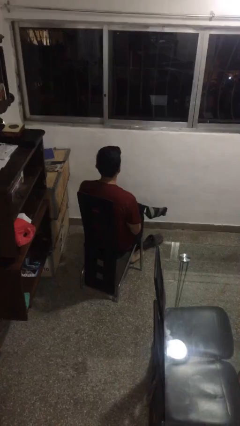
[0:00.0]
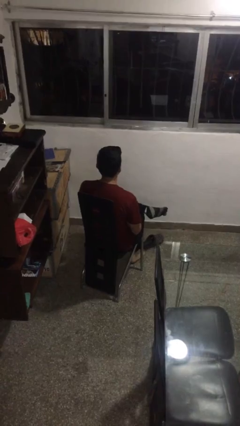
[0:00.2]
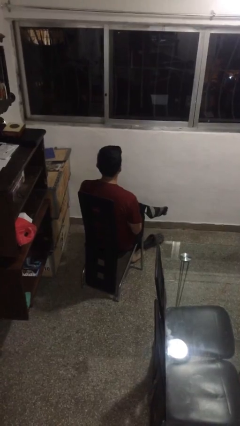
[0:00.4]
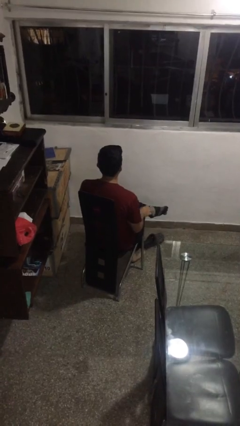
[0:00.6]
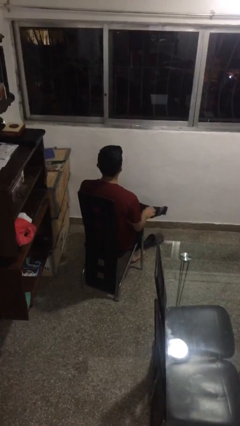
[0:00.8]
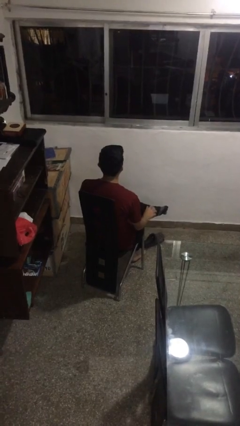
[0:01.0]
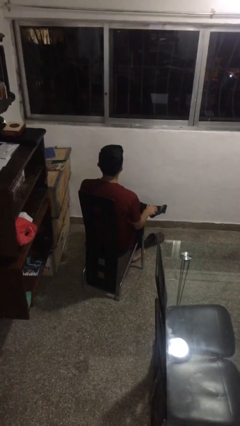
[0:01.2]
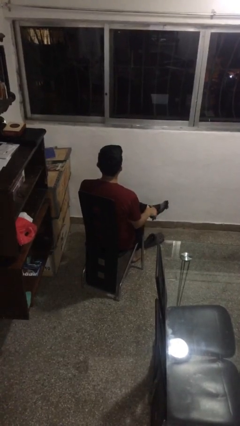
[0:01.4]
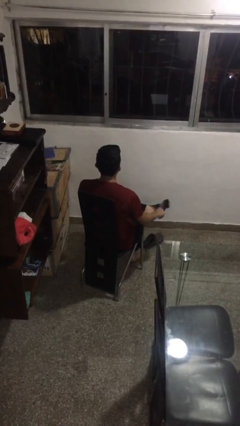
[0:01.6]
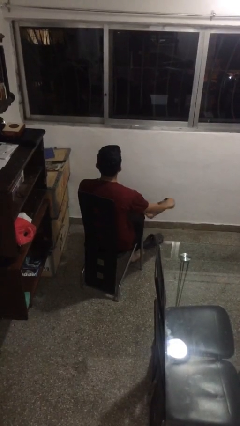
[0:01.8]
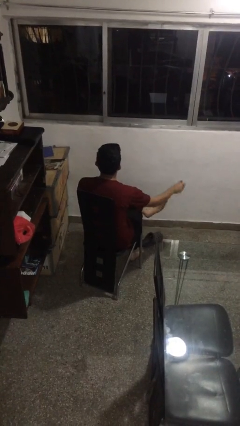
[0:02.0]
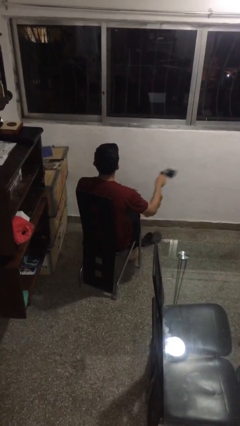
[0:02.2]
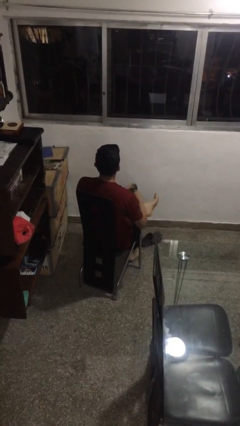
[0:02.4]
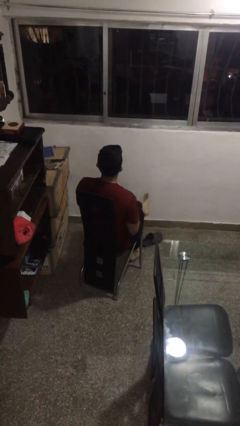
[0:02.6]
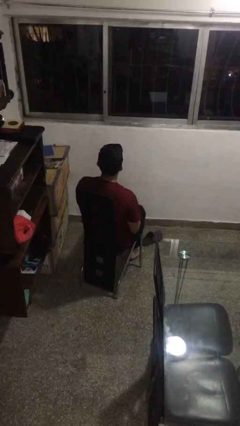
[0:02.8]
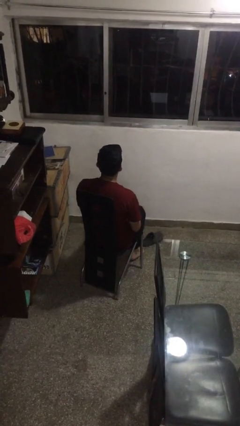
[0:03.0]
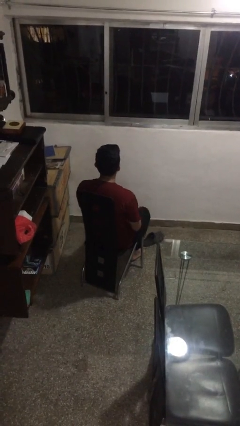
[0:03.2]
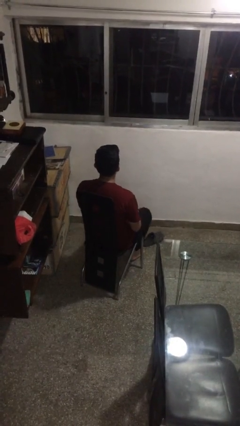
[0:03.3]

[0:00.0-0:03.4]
person takes off socks

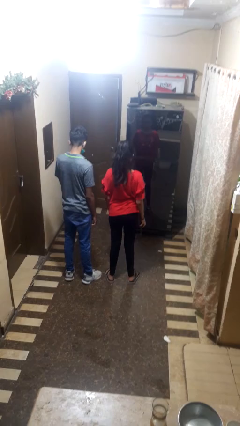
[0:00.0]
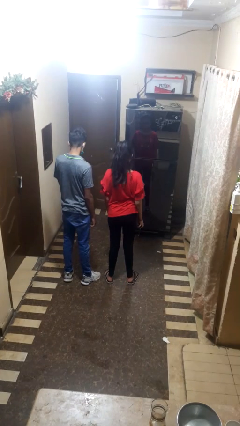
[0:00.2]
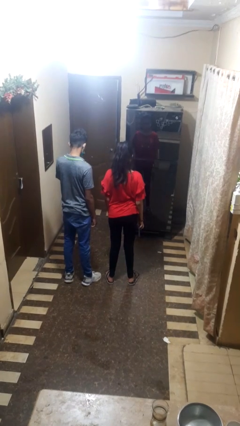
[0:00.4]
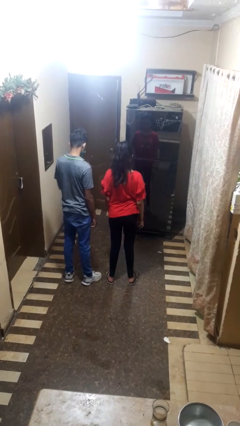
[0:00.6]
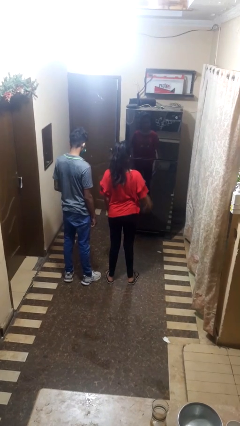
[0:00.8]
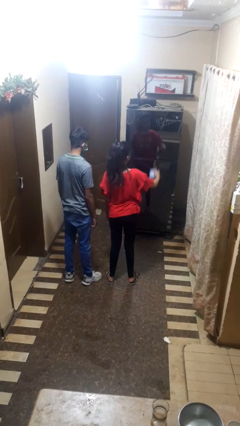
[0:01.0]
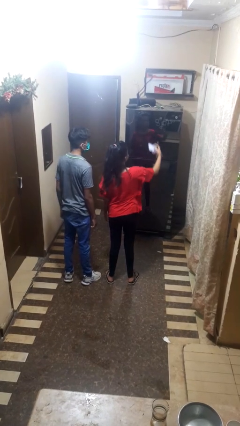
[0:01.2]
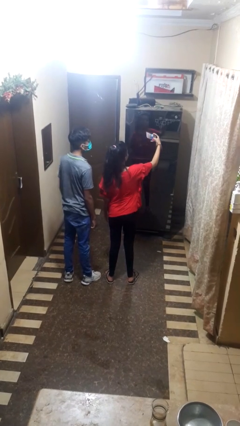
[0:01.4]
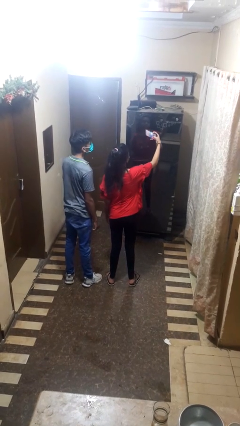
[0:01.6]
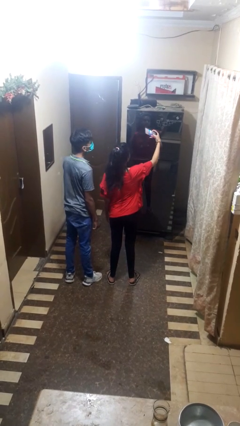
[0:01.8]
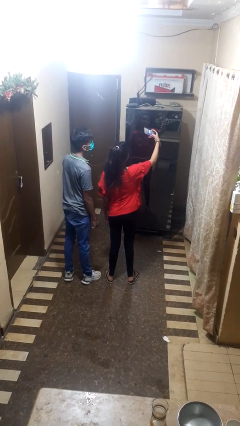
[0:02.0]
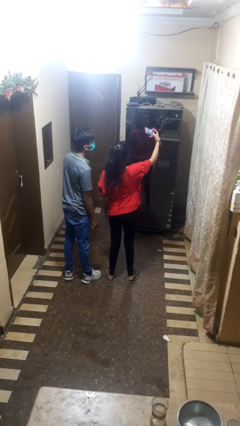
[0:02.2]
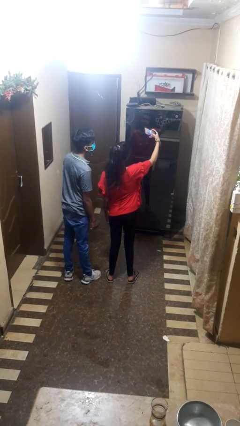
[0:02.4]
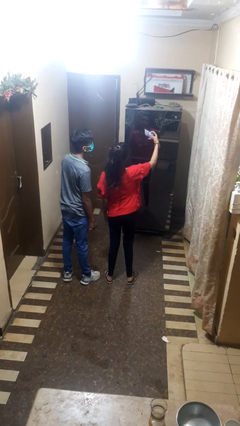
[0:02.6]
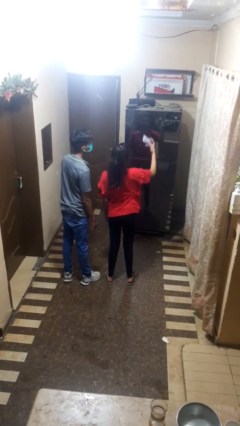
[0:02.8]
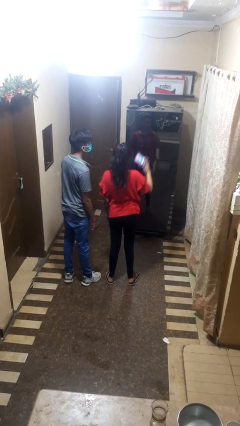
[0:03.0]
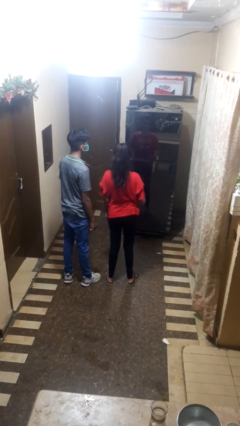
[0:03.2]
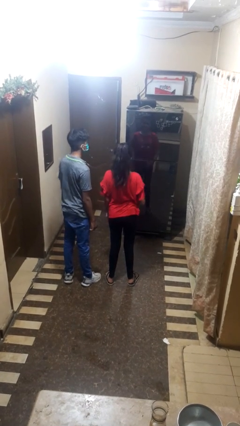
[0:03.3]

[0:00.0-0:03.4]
person takes selfie with person

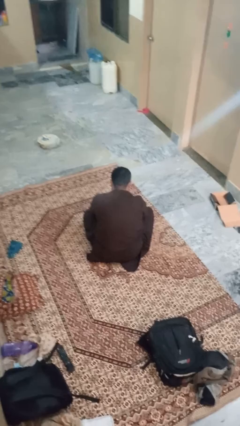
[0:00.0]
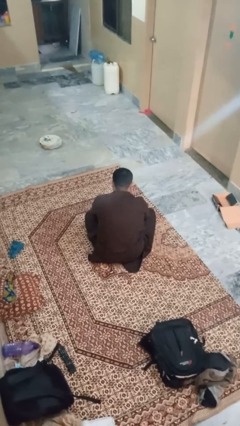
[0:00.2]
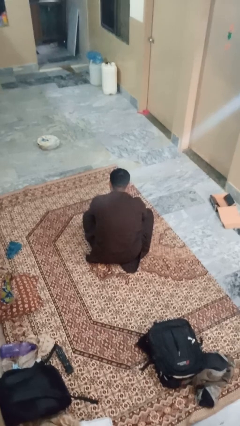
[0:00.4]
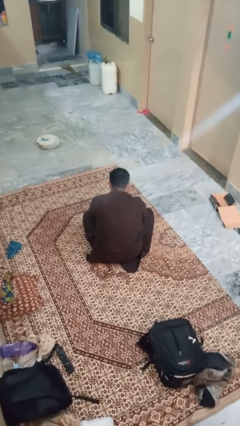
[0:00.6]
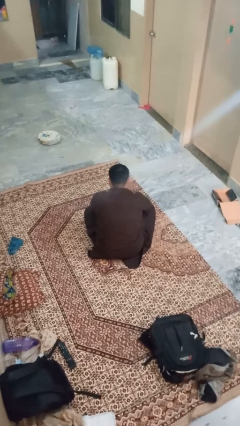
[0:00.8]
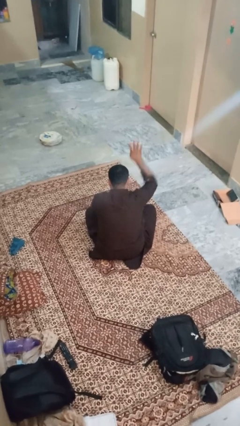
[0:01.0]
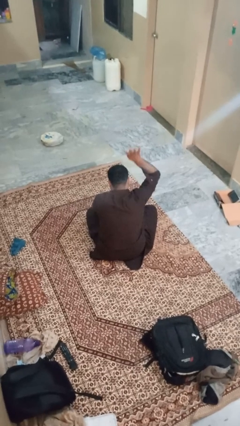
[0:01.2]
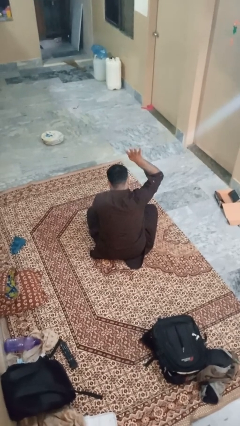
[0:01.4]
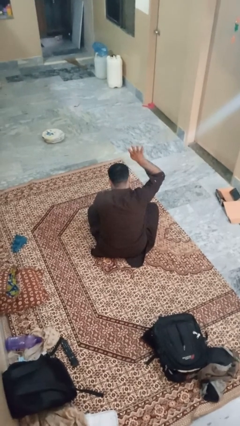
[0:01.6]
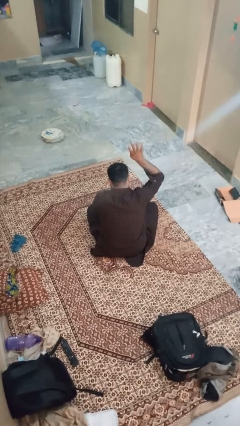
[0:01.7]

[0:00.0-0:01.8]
person gestures number four

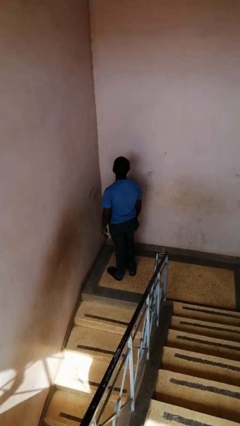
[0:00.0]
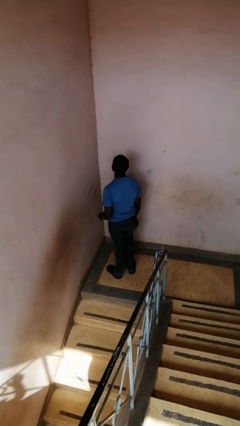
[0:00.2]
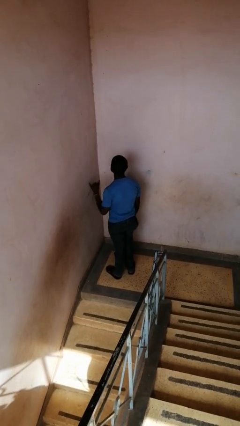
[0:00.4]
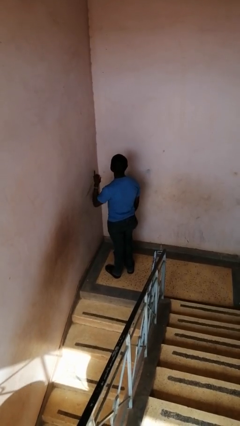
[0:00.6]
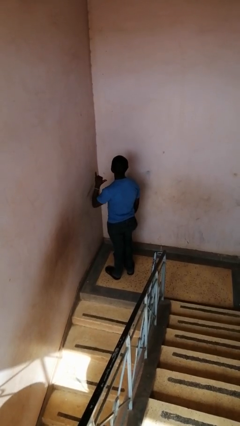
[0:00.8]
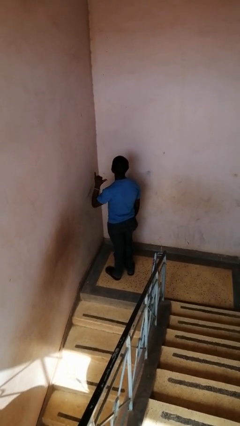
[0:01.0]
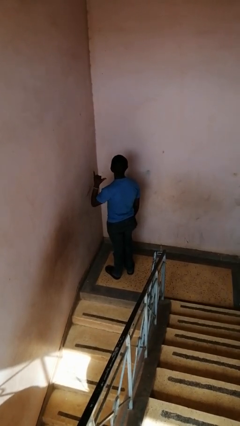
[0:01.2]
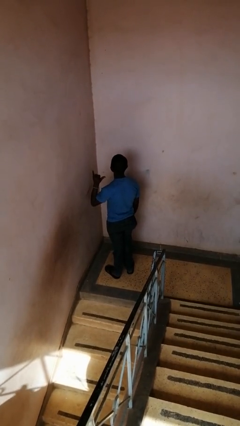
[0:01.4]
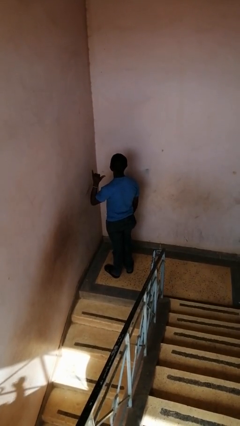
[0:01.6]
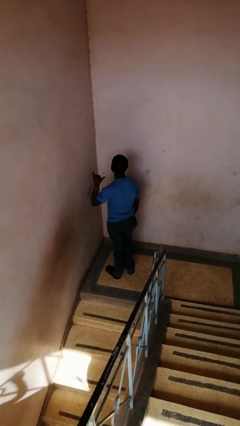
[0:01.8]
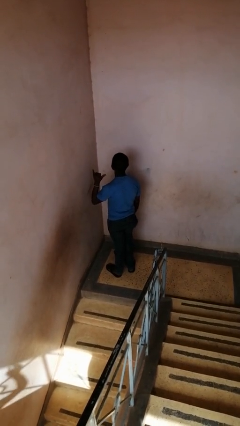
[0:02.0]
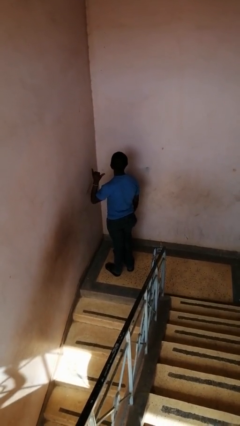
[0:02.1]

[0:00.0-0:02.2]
person gestures hang loose

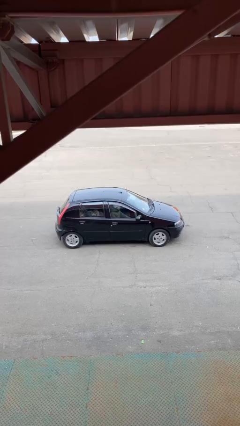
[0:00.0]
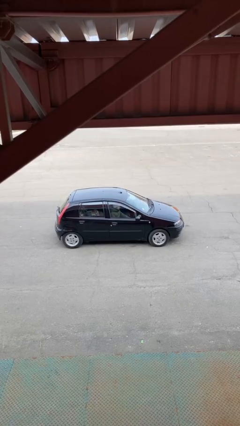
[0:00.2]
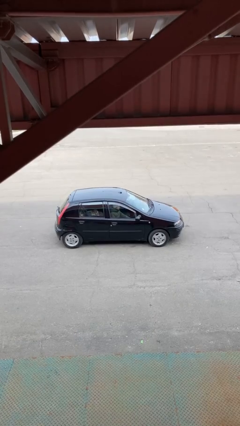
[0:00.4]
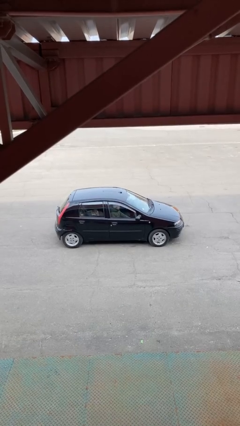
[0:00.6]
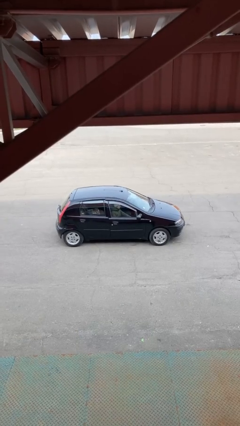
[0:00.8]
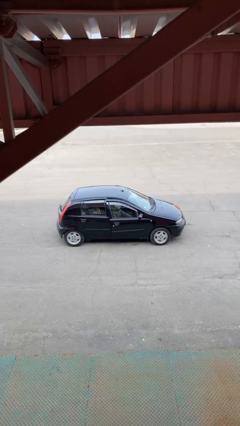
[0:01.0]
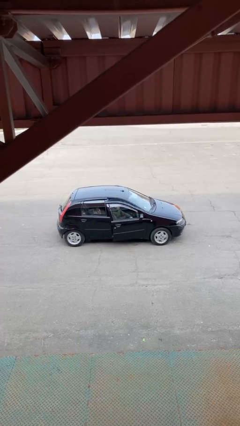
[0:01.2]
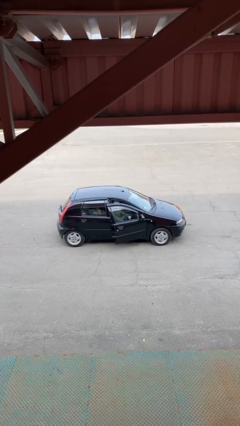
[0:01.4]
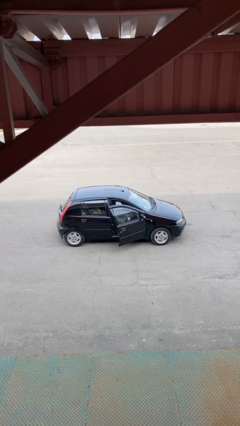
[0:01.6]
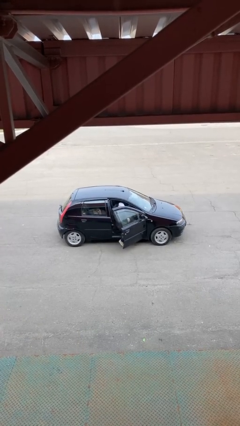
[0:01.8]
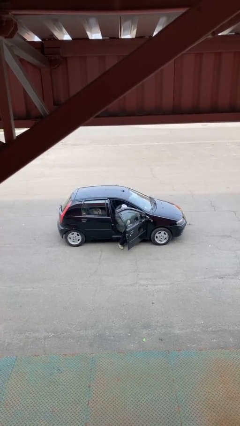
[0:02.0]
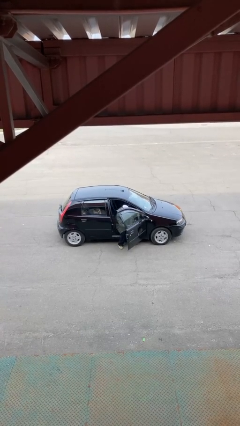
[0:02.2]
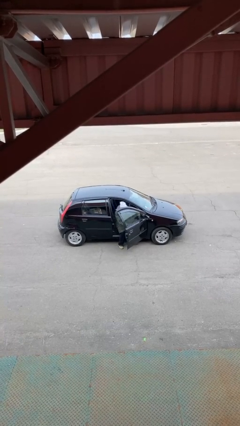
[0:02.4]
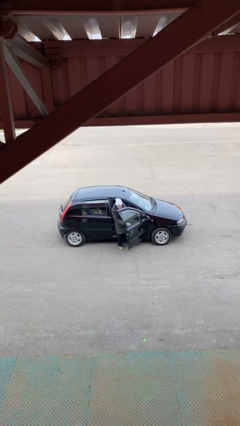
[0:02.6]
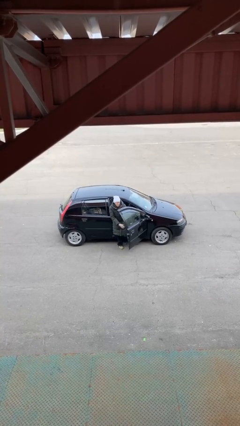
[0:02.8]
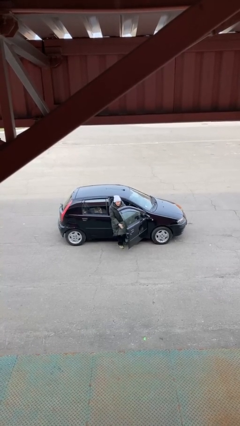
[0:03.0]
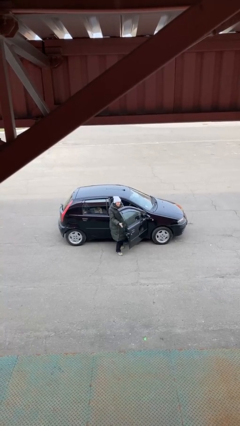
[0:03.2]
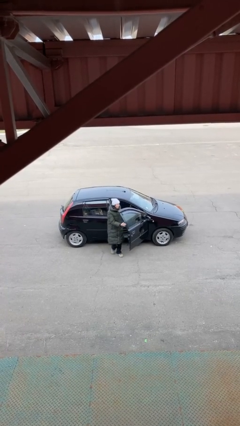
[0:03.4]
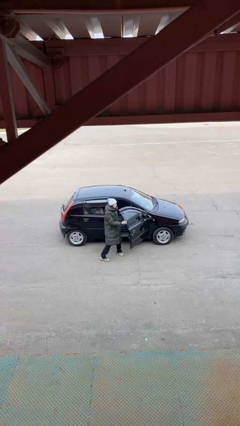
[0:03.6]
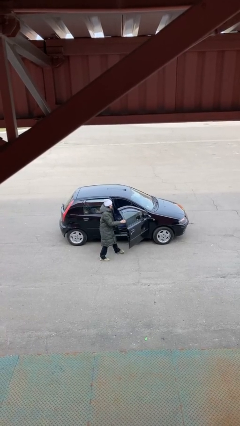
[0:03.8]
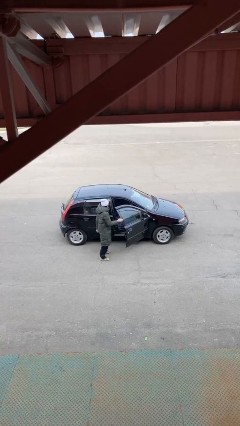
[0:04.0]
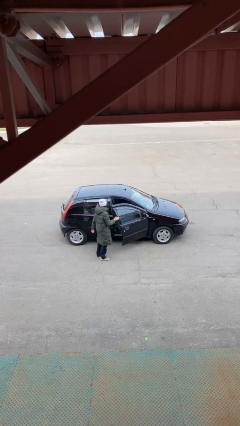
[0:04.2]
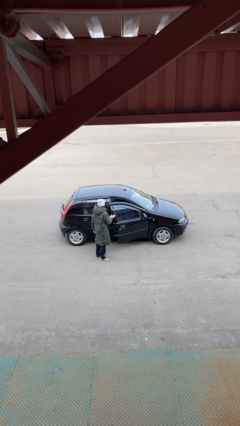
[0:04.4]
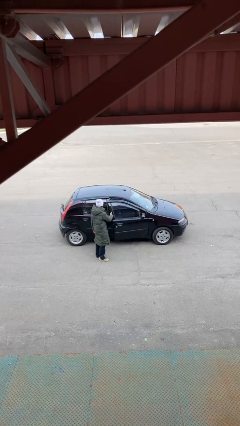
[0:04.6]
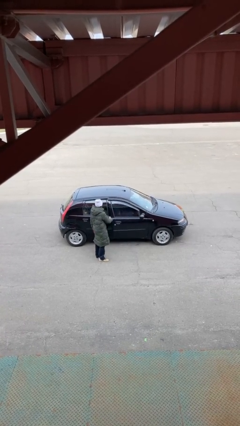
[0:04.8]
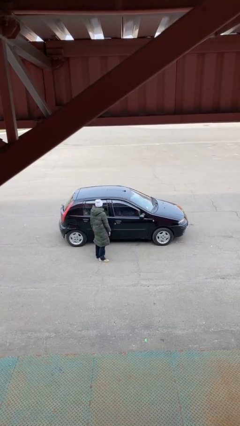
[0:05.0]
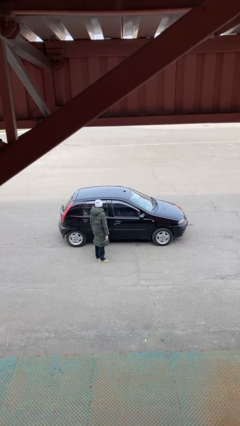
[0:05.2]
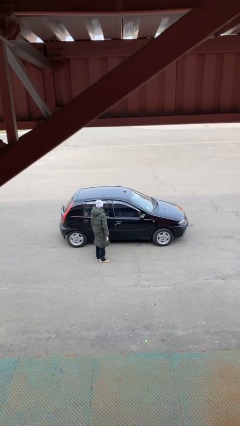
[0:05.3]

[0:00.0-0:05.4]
car drops off person

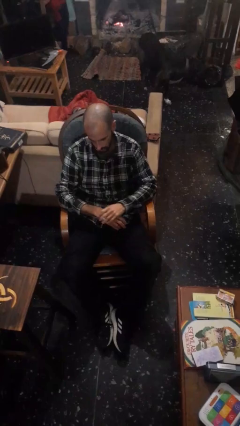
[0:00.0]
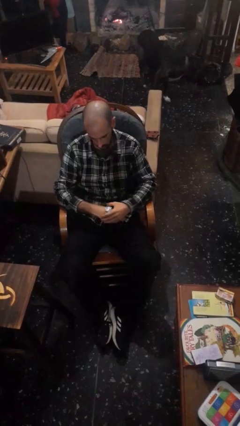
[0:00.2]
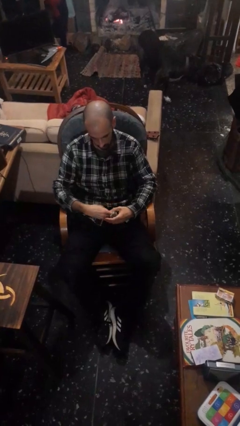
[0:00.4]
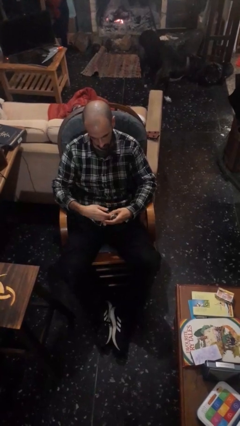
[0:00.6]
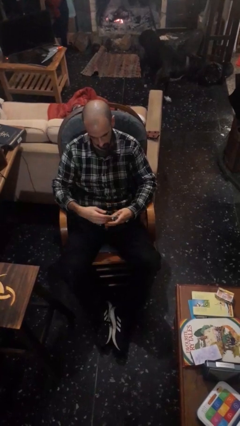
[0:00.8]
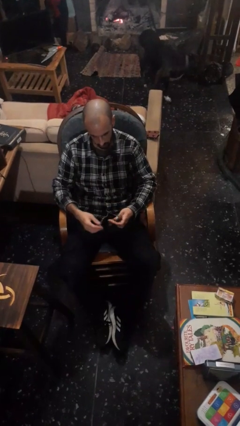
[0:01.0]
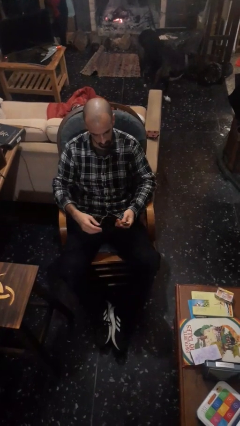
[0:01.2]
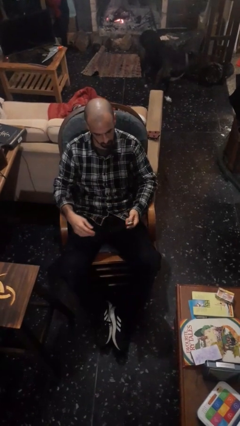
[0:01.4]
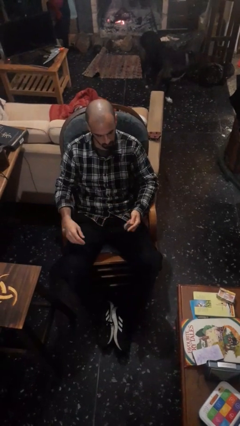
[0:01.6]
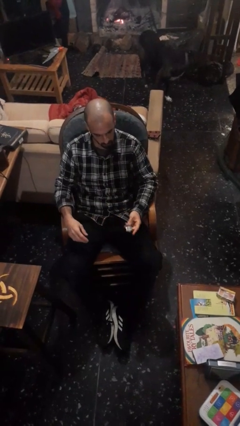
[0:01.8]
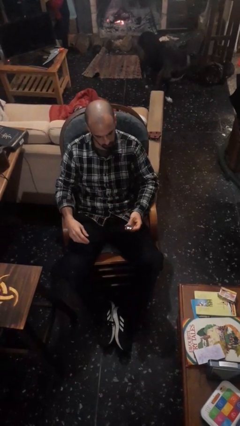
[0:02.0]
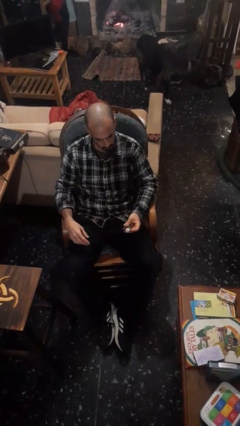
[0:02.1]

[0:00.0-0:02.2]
person takes off wristwatch
